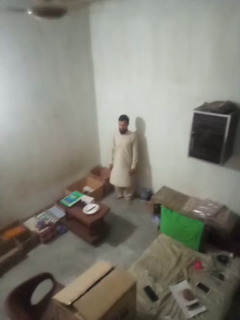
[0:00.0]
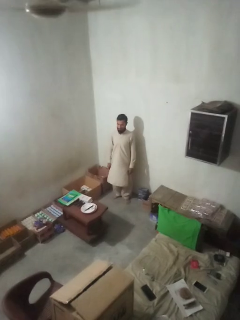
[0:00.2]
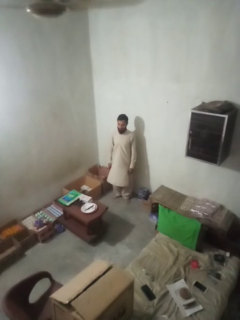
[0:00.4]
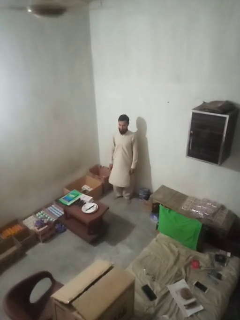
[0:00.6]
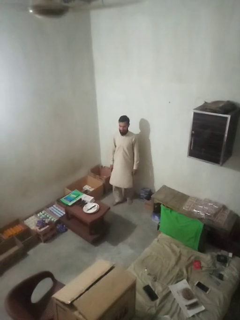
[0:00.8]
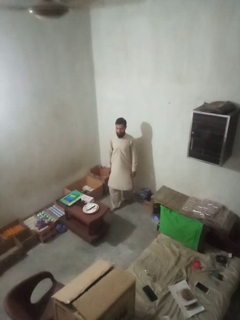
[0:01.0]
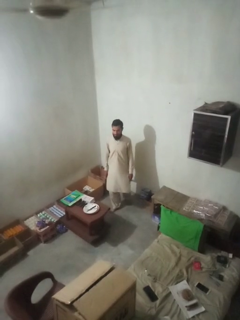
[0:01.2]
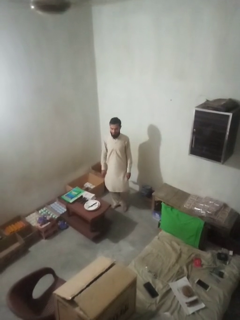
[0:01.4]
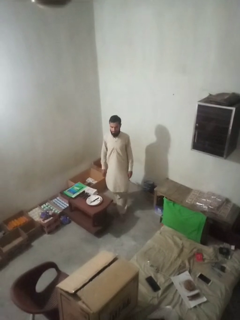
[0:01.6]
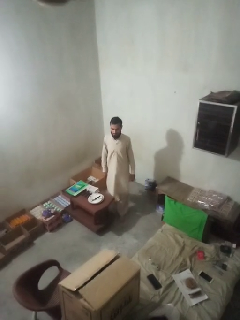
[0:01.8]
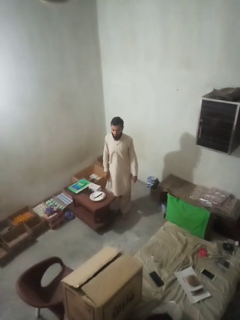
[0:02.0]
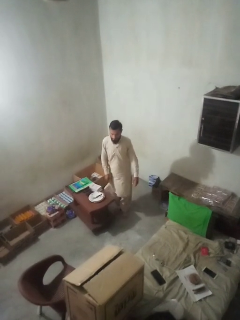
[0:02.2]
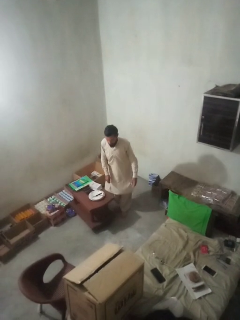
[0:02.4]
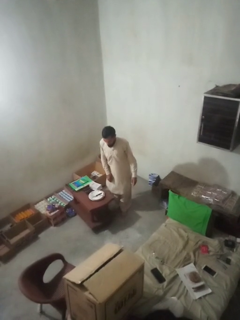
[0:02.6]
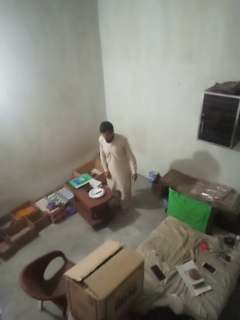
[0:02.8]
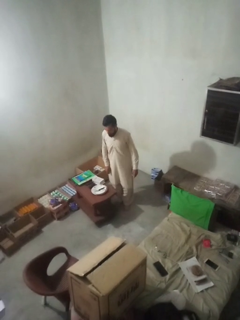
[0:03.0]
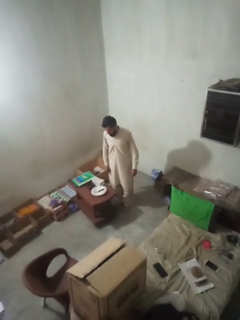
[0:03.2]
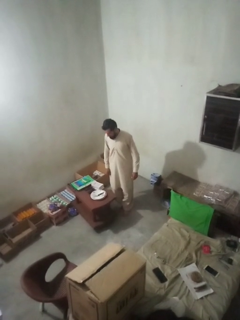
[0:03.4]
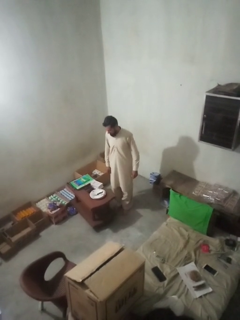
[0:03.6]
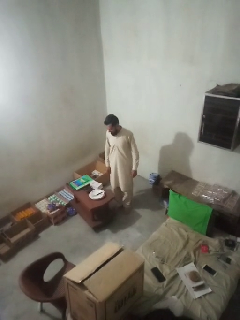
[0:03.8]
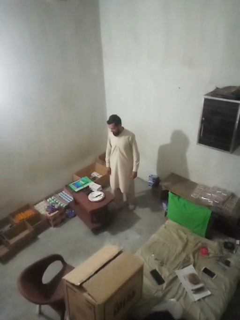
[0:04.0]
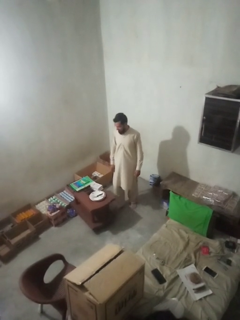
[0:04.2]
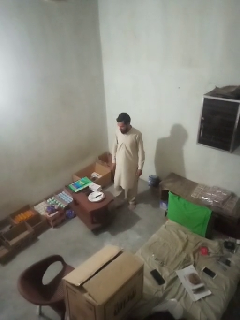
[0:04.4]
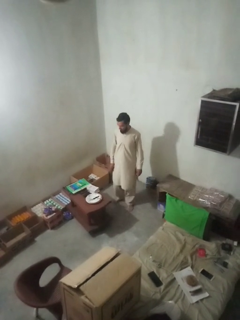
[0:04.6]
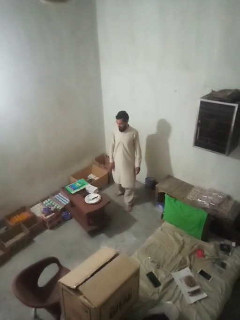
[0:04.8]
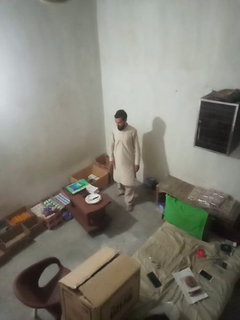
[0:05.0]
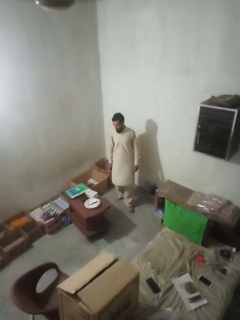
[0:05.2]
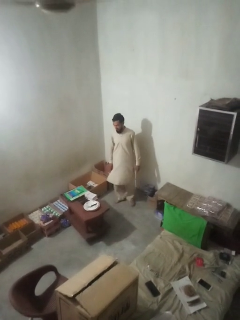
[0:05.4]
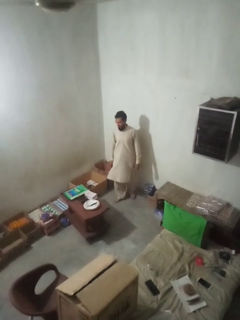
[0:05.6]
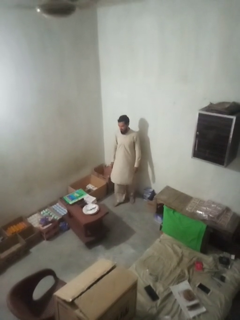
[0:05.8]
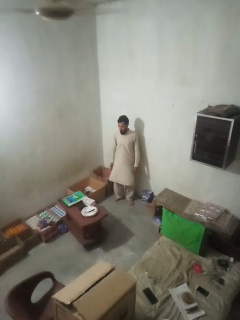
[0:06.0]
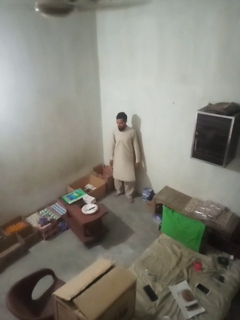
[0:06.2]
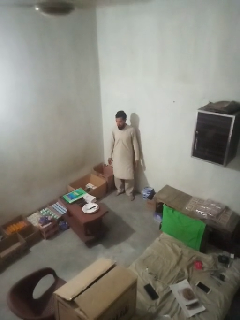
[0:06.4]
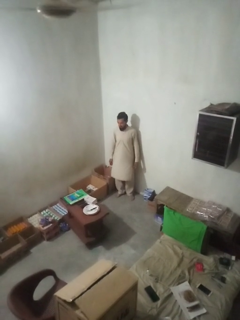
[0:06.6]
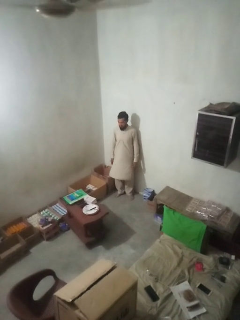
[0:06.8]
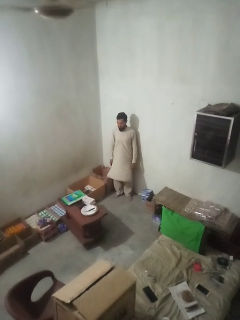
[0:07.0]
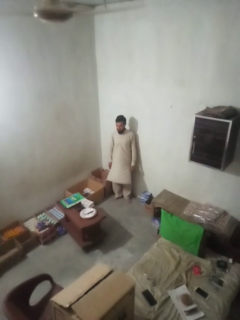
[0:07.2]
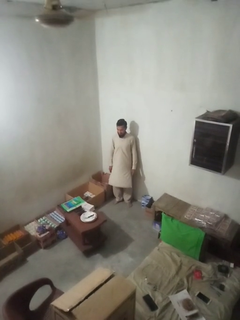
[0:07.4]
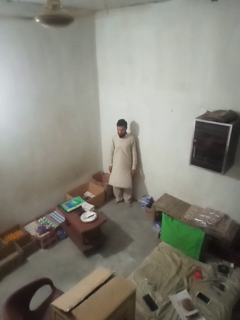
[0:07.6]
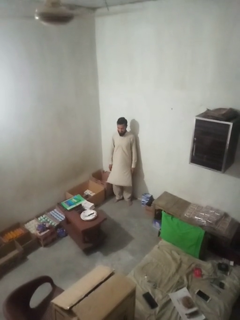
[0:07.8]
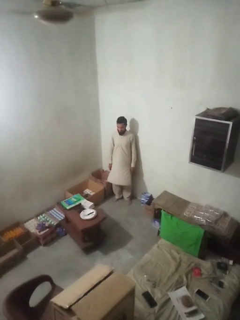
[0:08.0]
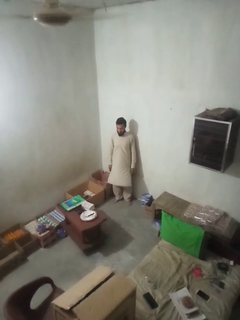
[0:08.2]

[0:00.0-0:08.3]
person bumps into table

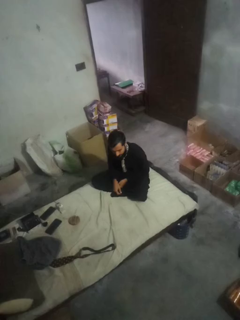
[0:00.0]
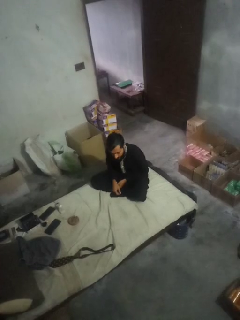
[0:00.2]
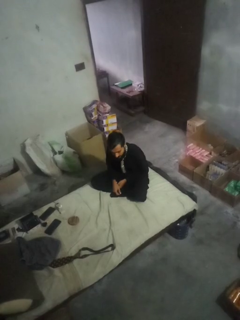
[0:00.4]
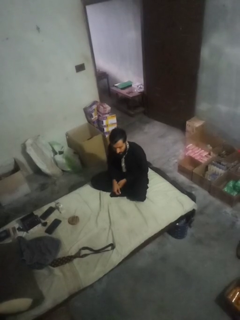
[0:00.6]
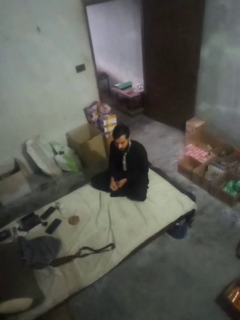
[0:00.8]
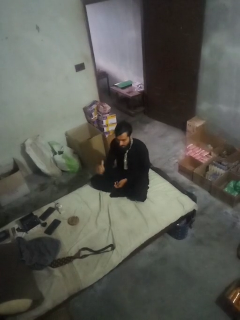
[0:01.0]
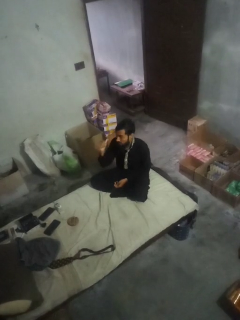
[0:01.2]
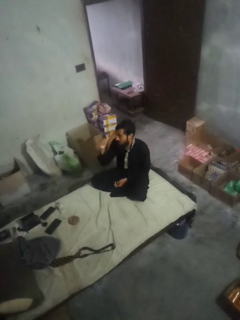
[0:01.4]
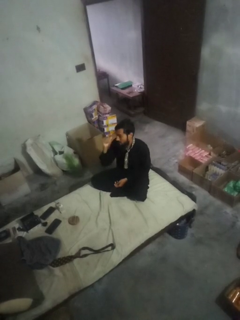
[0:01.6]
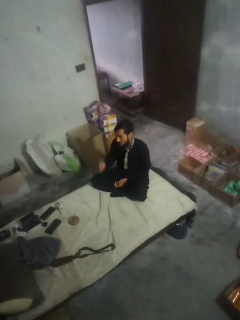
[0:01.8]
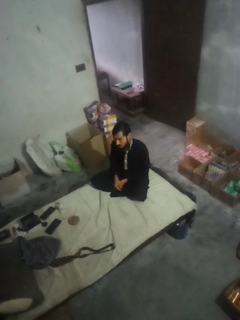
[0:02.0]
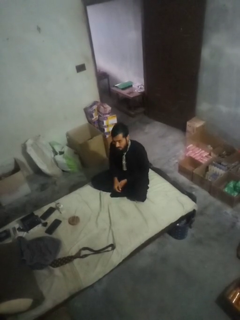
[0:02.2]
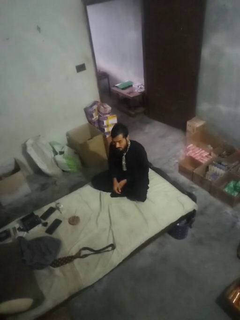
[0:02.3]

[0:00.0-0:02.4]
person gestures behind me

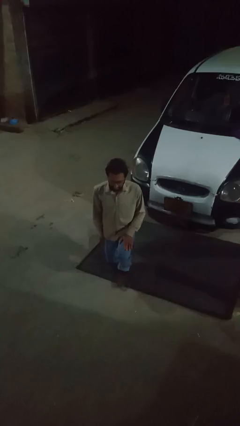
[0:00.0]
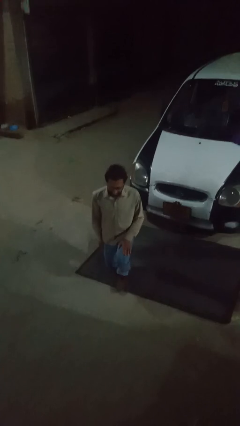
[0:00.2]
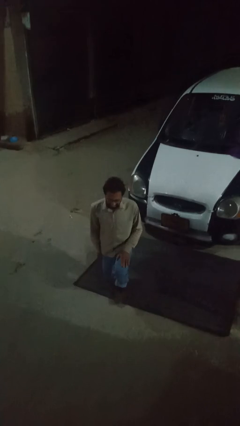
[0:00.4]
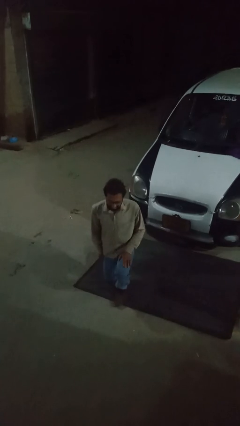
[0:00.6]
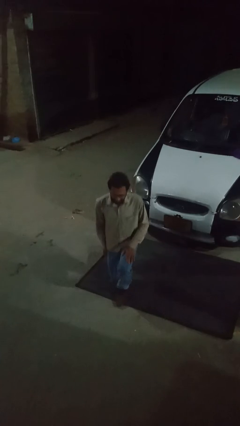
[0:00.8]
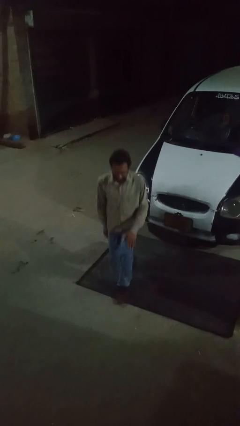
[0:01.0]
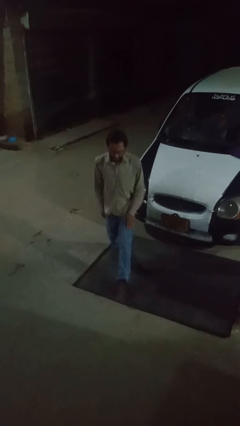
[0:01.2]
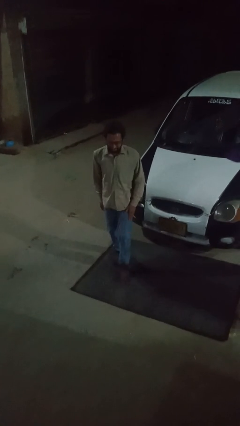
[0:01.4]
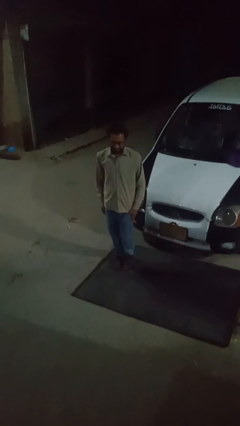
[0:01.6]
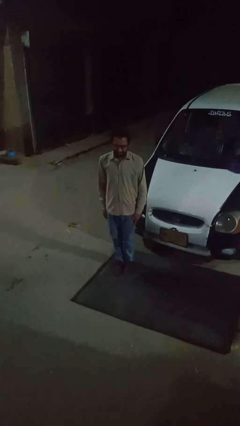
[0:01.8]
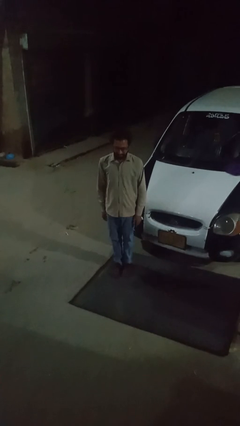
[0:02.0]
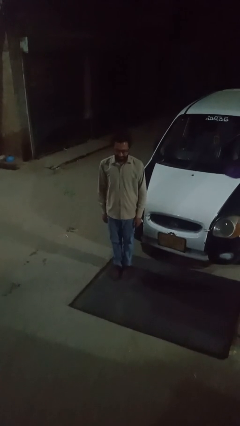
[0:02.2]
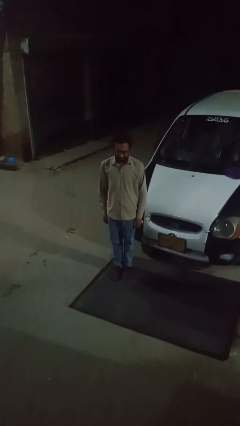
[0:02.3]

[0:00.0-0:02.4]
person stands up

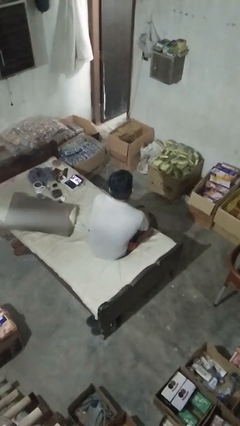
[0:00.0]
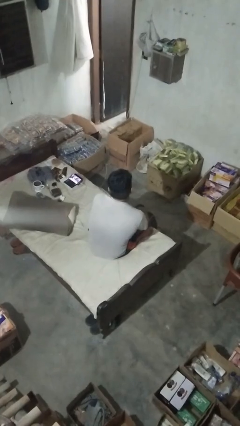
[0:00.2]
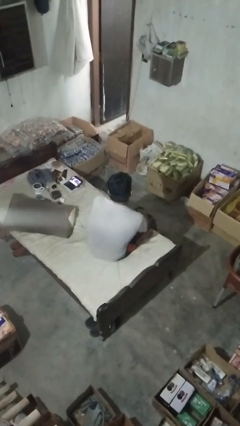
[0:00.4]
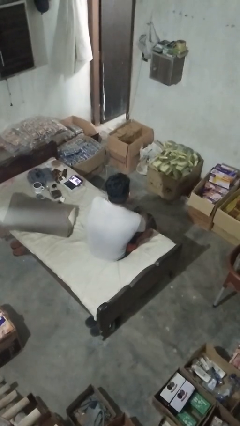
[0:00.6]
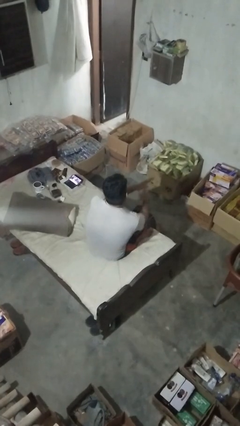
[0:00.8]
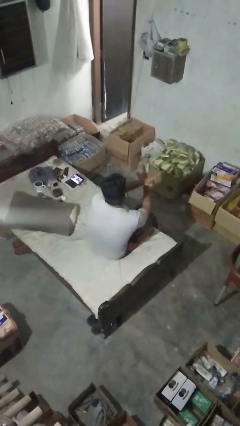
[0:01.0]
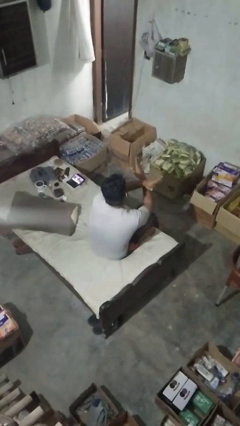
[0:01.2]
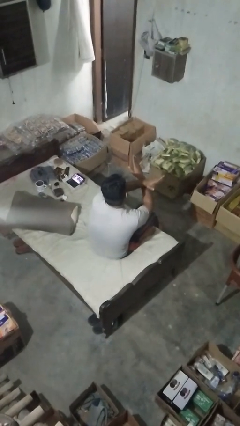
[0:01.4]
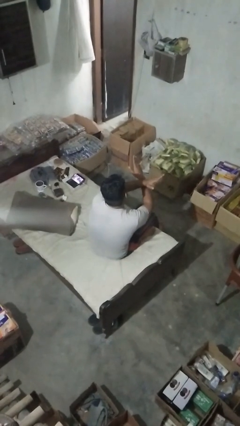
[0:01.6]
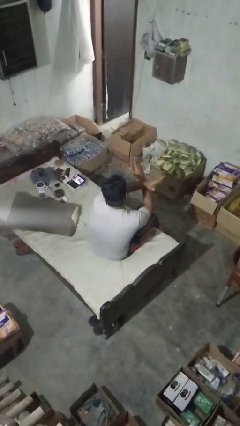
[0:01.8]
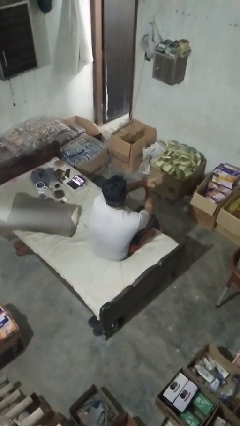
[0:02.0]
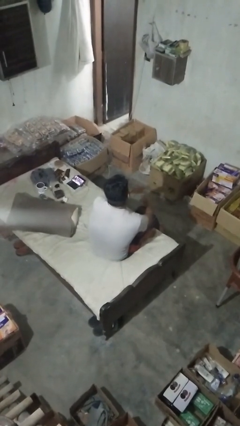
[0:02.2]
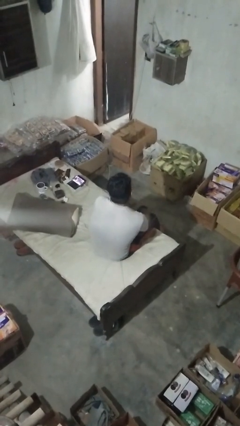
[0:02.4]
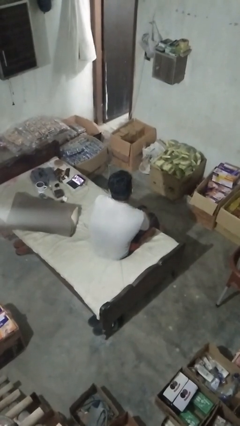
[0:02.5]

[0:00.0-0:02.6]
person gestures arms x

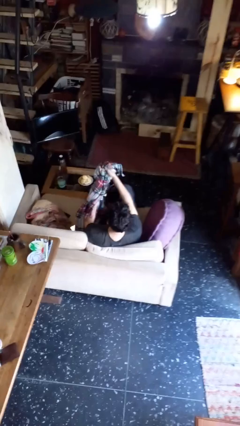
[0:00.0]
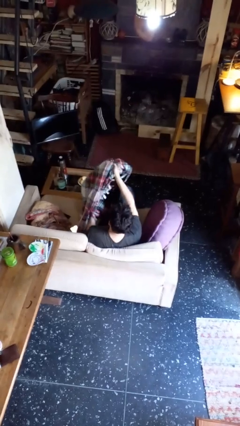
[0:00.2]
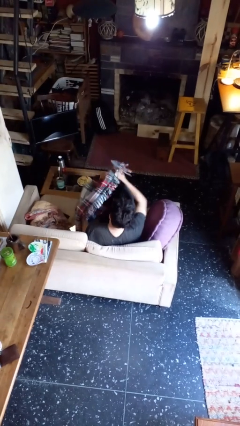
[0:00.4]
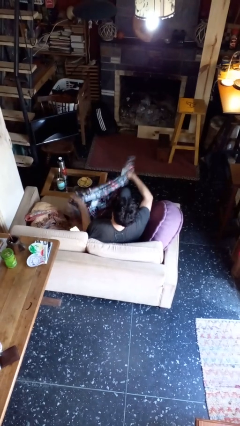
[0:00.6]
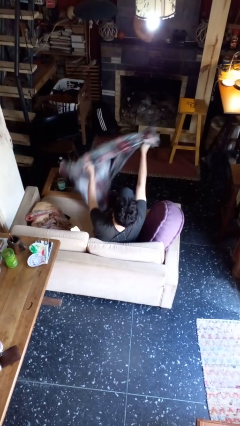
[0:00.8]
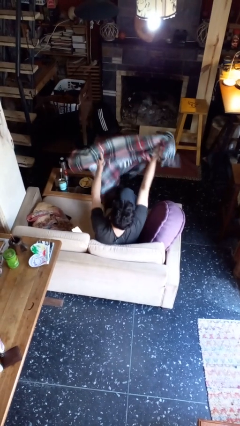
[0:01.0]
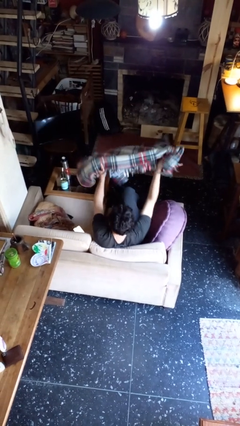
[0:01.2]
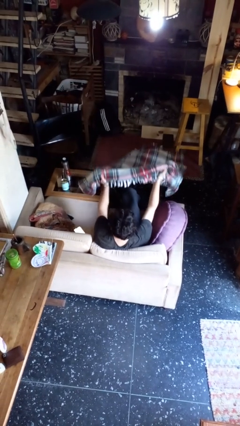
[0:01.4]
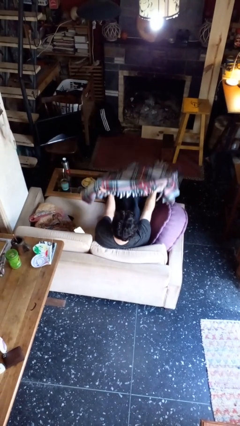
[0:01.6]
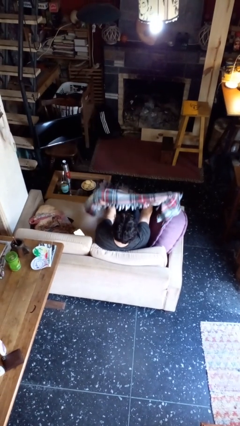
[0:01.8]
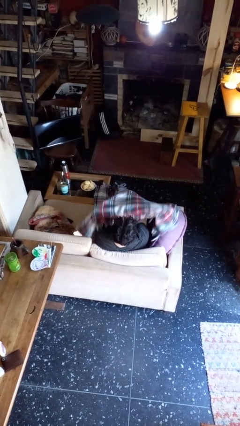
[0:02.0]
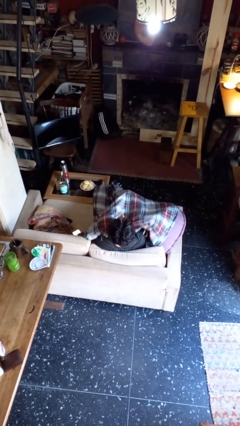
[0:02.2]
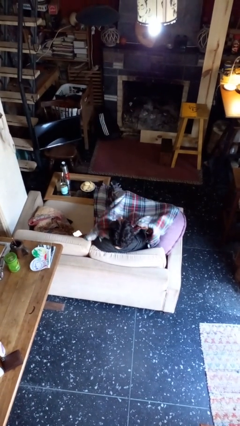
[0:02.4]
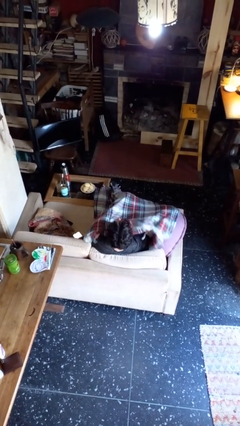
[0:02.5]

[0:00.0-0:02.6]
person covers with blanket

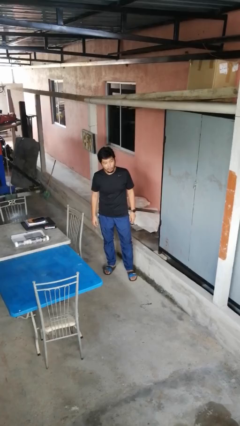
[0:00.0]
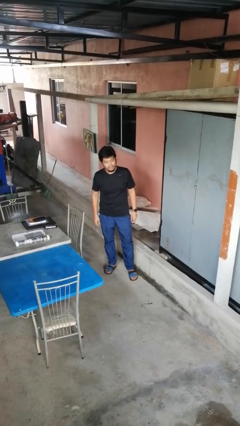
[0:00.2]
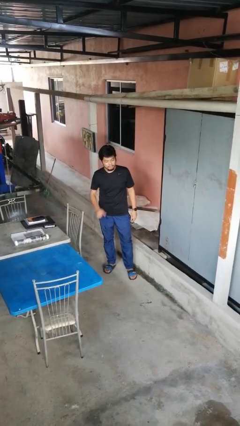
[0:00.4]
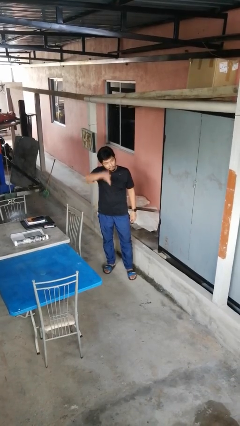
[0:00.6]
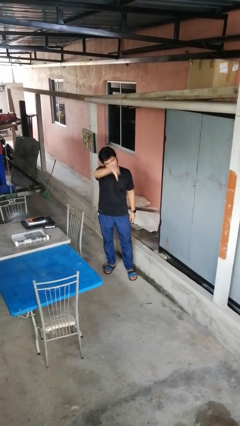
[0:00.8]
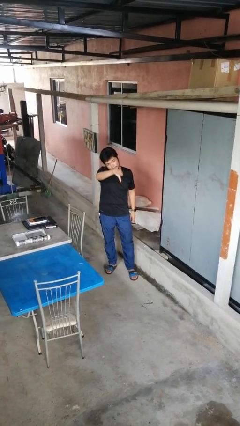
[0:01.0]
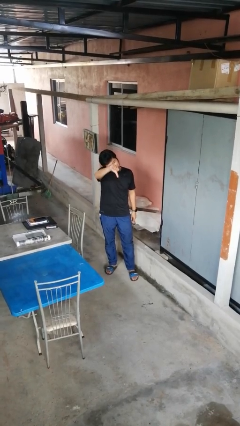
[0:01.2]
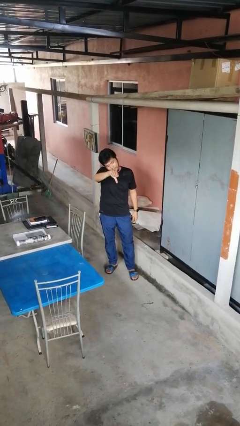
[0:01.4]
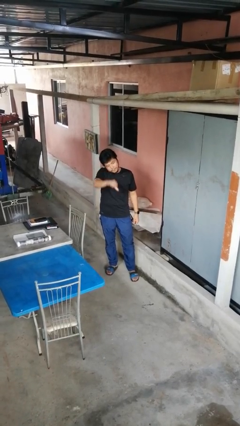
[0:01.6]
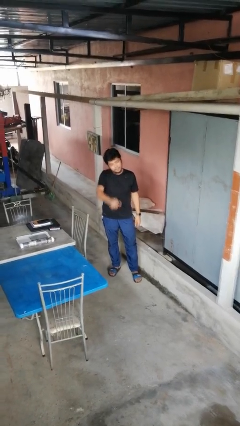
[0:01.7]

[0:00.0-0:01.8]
person opens gate
